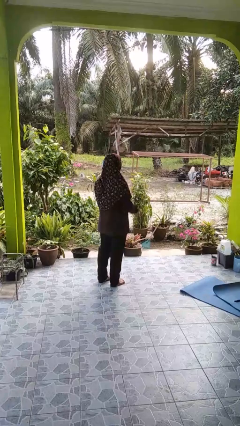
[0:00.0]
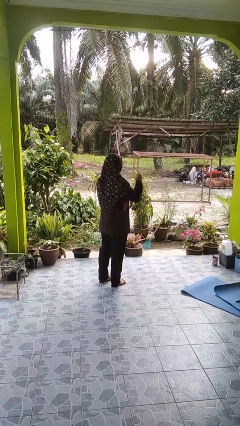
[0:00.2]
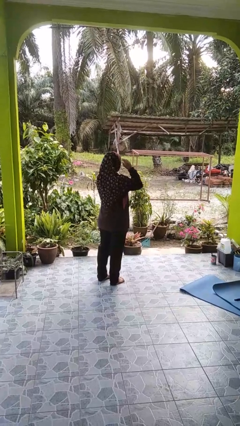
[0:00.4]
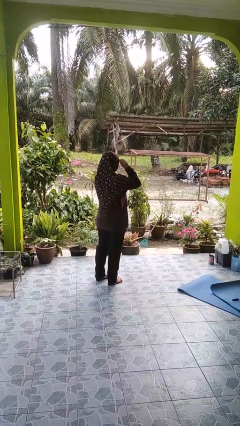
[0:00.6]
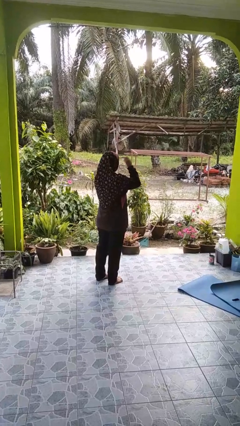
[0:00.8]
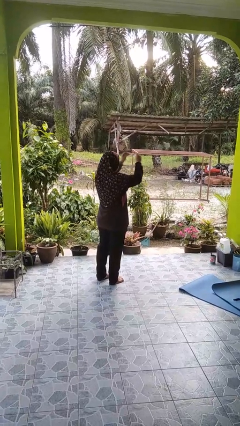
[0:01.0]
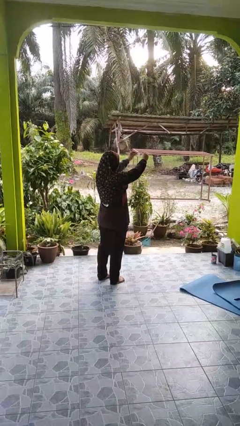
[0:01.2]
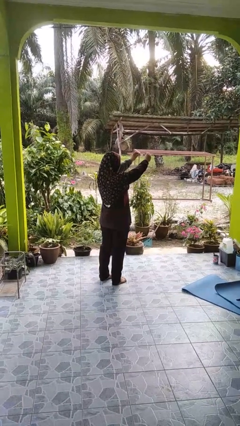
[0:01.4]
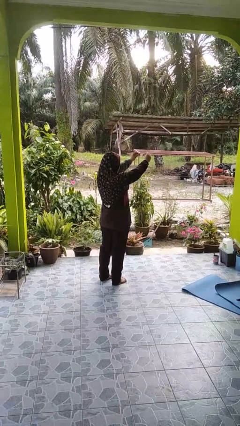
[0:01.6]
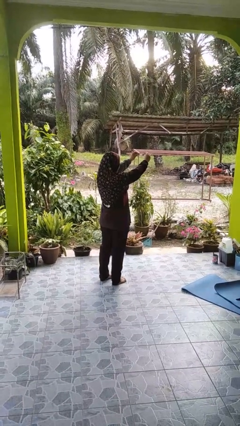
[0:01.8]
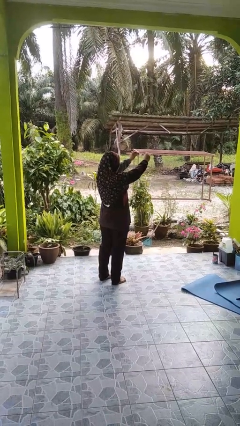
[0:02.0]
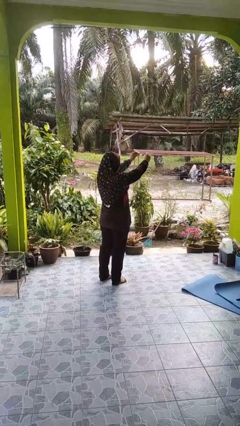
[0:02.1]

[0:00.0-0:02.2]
person takes off glasses

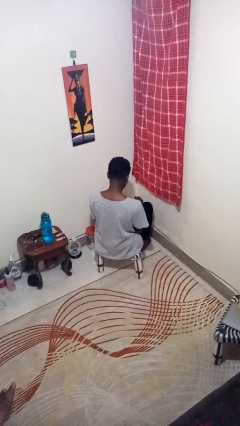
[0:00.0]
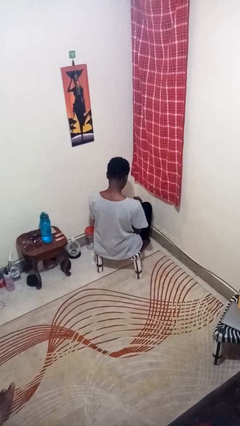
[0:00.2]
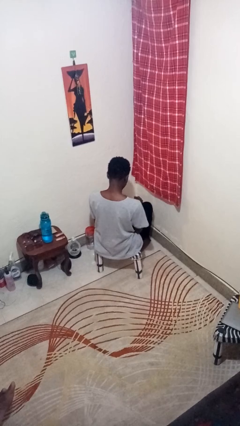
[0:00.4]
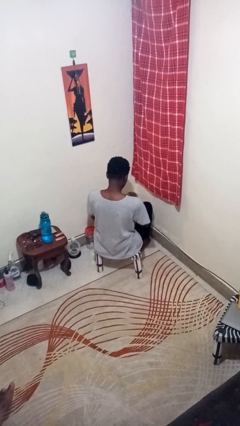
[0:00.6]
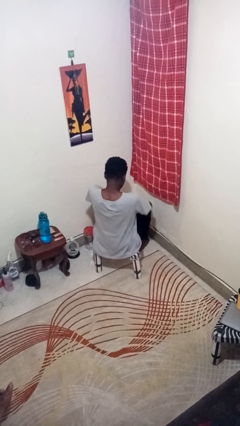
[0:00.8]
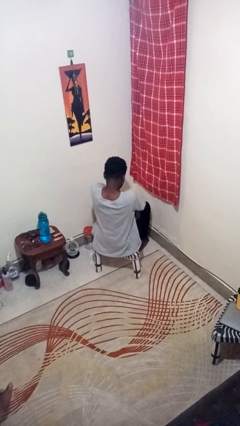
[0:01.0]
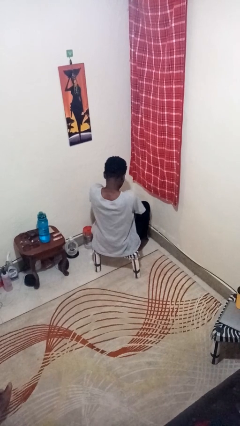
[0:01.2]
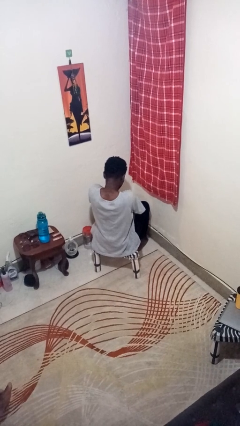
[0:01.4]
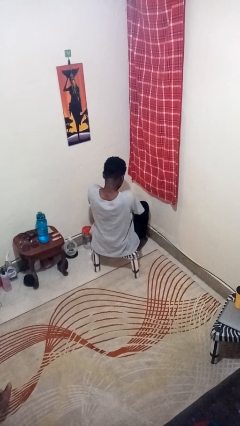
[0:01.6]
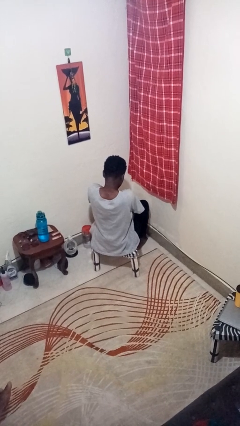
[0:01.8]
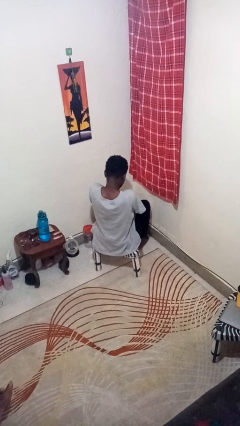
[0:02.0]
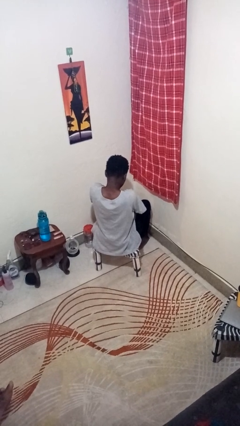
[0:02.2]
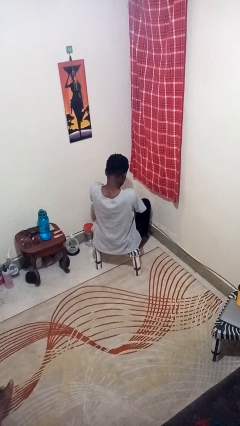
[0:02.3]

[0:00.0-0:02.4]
person crosses arms

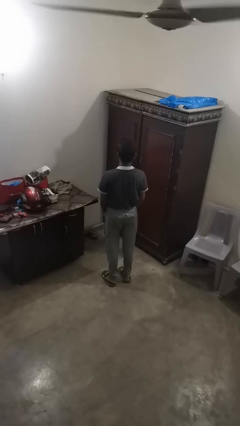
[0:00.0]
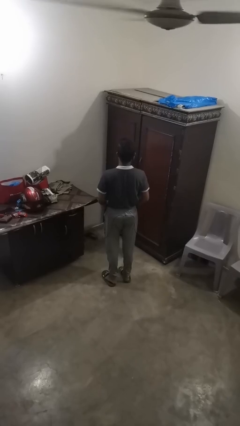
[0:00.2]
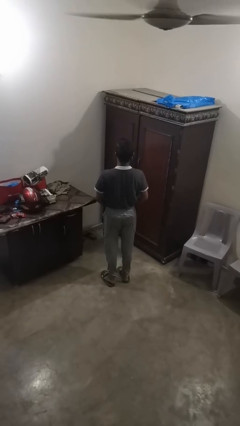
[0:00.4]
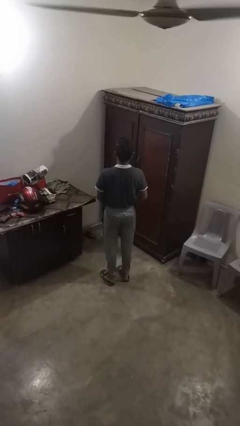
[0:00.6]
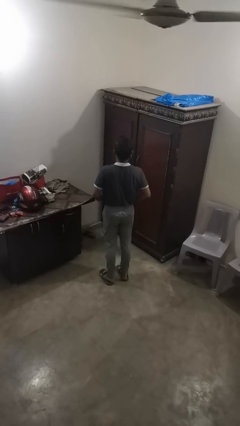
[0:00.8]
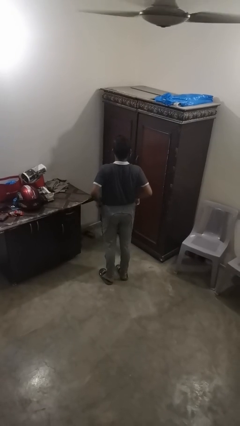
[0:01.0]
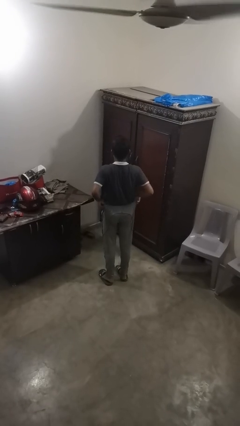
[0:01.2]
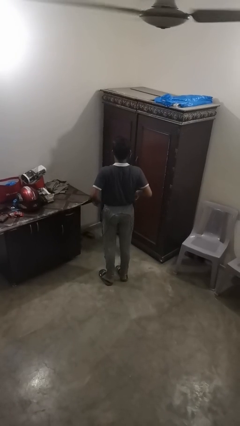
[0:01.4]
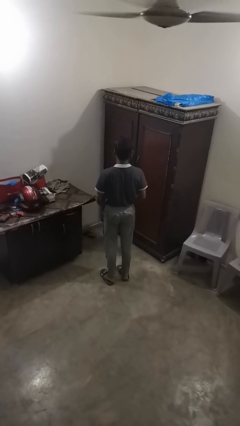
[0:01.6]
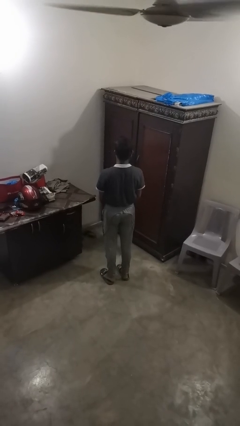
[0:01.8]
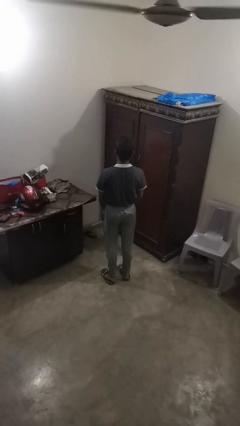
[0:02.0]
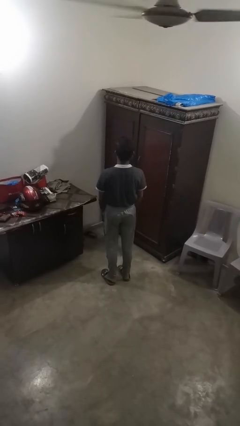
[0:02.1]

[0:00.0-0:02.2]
person hikes up pants

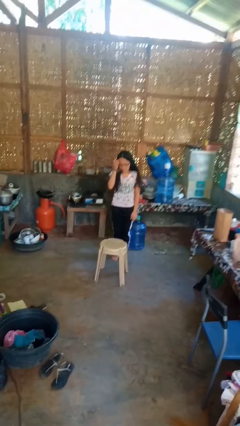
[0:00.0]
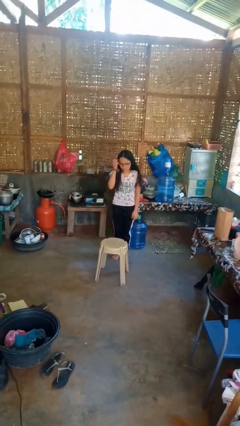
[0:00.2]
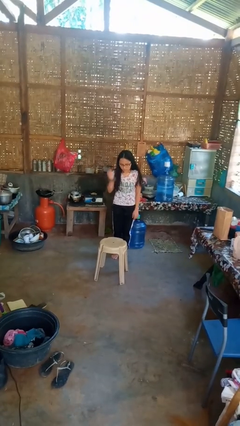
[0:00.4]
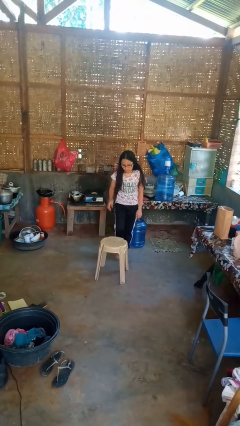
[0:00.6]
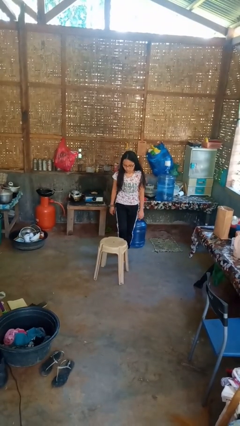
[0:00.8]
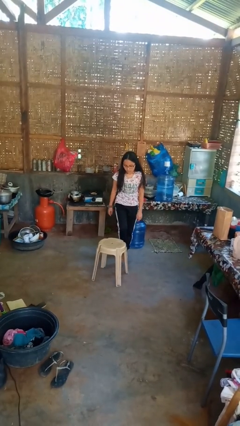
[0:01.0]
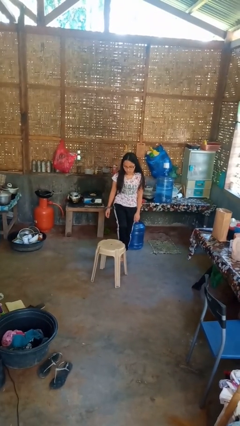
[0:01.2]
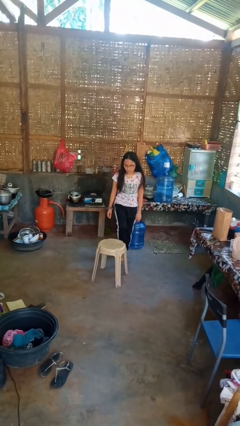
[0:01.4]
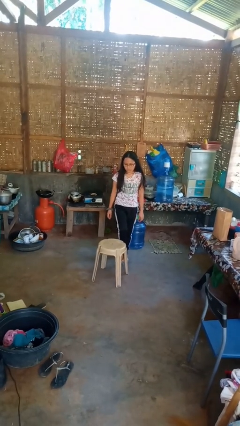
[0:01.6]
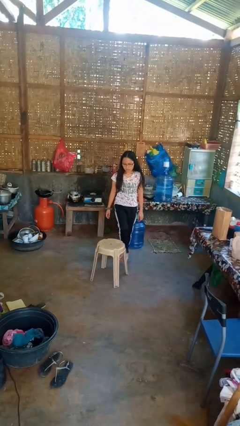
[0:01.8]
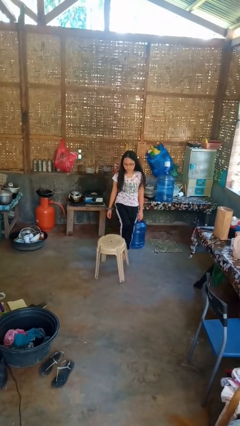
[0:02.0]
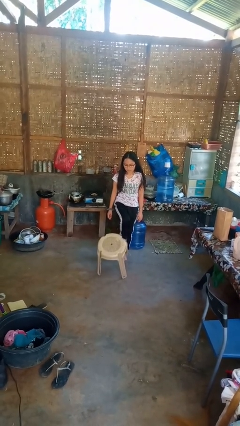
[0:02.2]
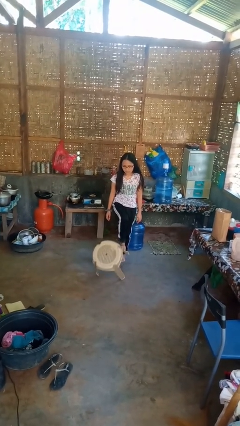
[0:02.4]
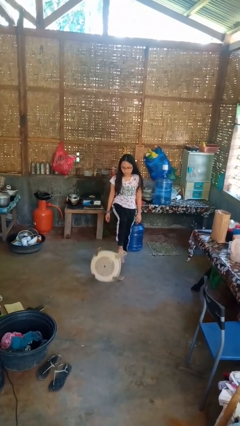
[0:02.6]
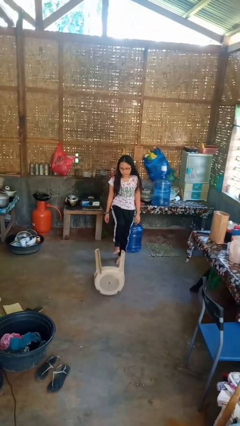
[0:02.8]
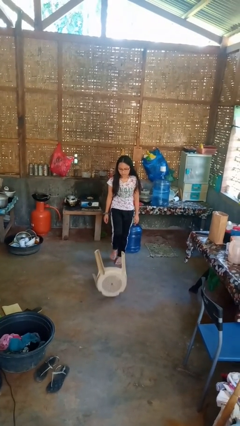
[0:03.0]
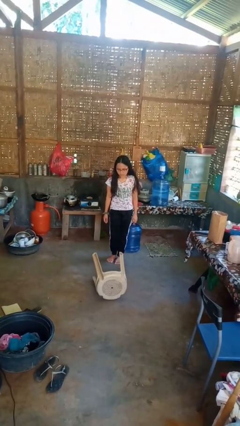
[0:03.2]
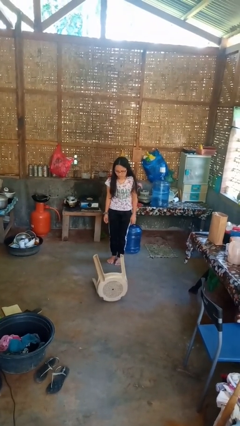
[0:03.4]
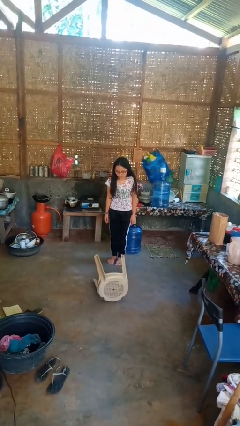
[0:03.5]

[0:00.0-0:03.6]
person knocks over furniture

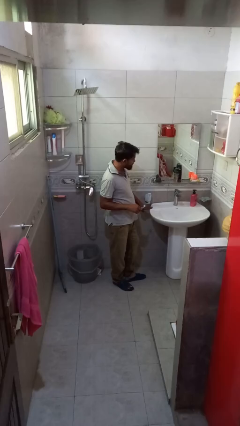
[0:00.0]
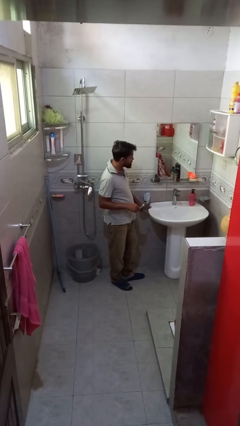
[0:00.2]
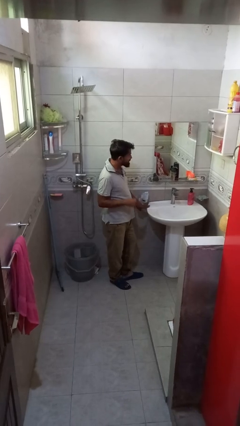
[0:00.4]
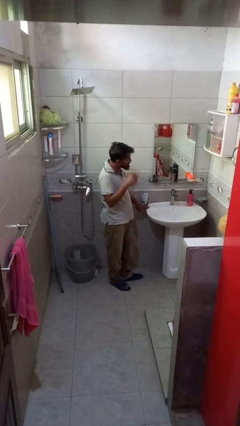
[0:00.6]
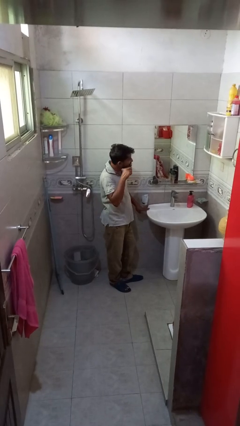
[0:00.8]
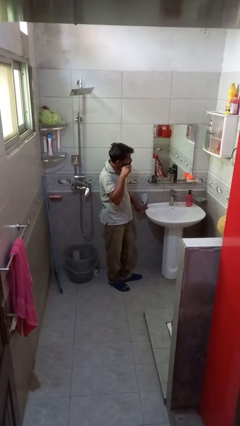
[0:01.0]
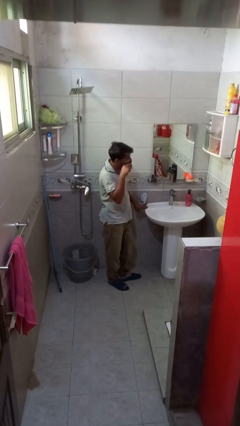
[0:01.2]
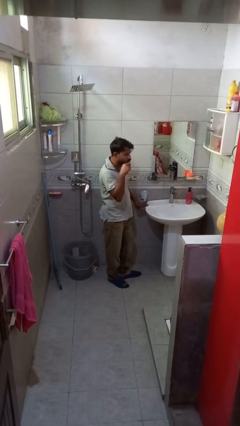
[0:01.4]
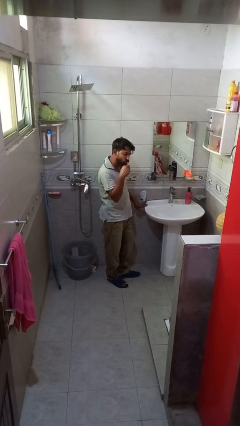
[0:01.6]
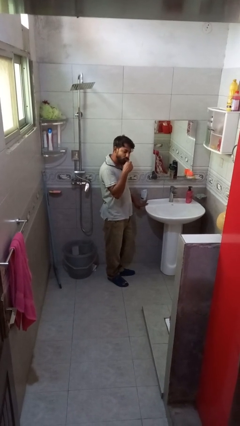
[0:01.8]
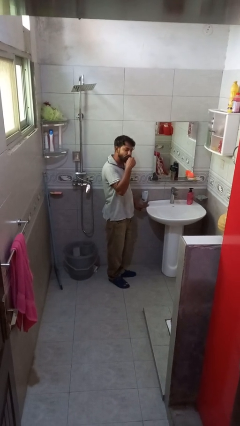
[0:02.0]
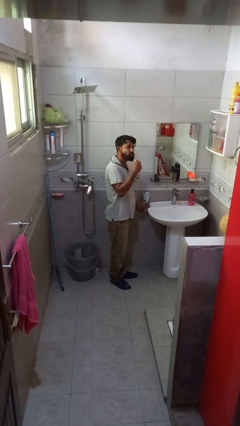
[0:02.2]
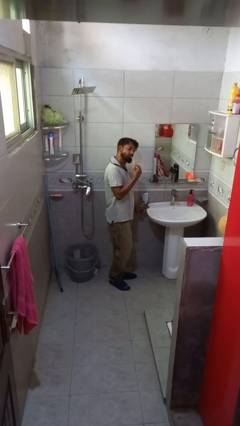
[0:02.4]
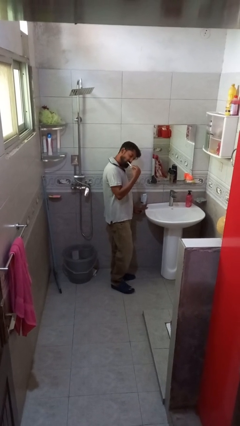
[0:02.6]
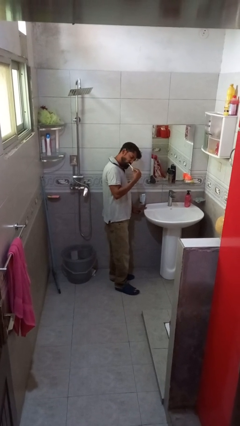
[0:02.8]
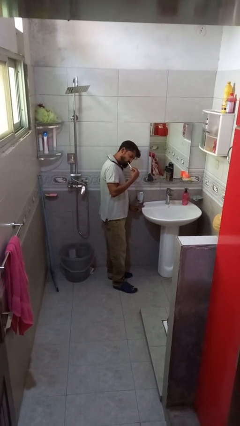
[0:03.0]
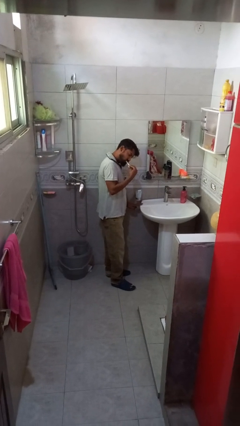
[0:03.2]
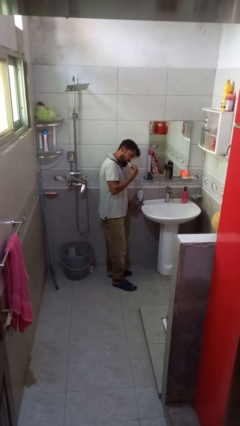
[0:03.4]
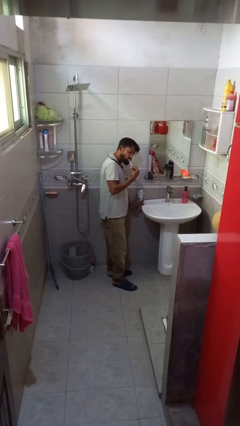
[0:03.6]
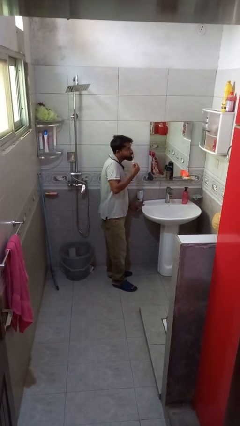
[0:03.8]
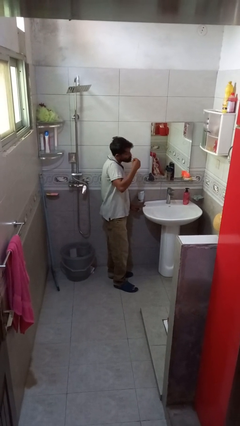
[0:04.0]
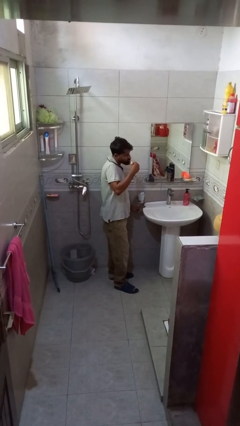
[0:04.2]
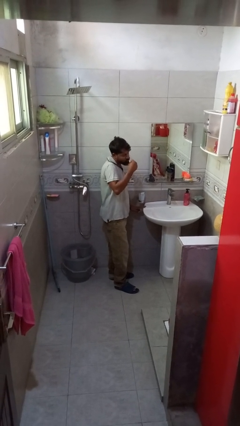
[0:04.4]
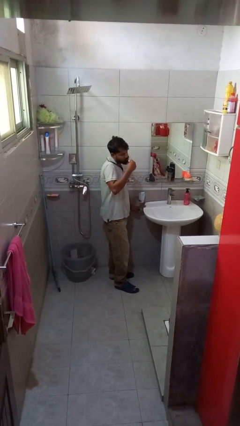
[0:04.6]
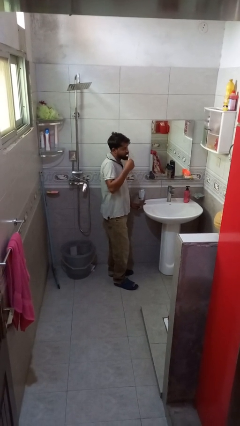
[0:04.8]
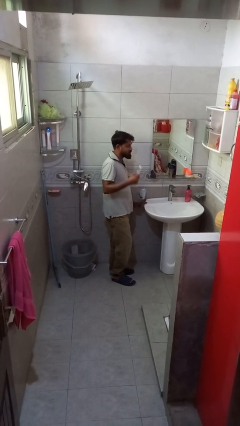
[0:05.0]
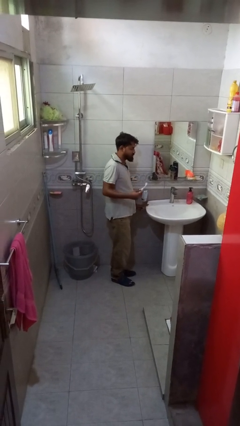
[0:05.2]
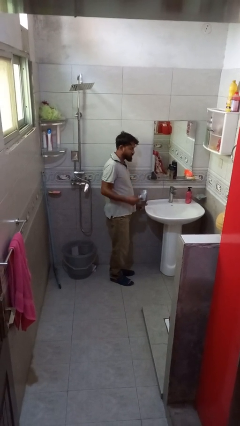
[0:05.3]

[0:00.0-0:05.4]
person brushes teeth

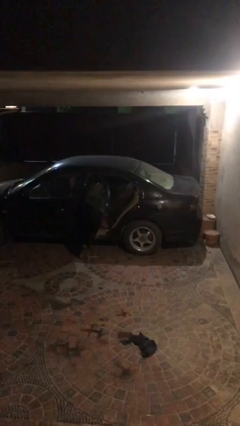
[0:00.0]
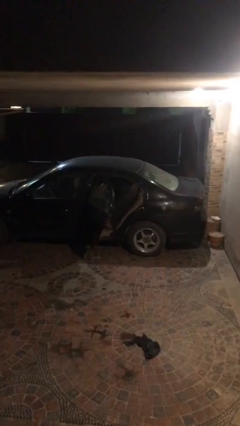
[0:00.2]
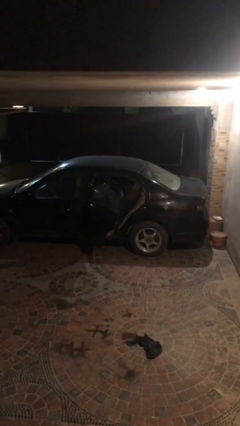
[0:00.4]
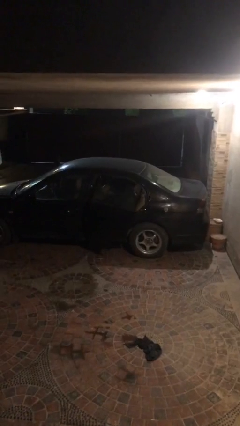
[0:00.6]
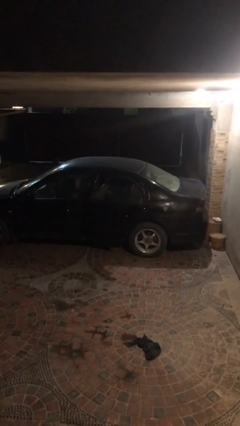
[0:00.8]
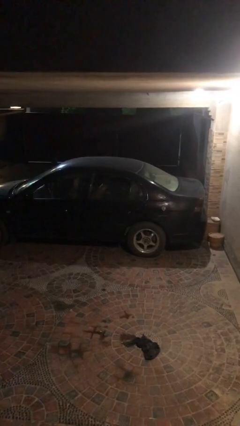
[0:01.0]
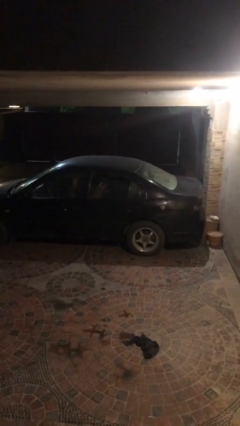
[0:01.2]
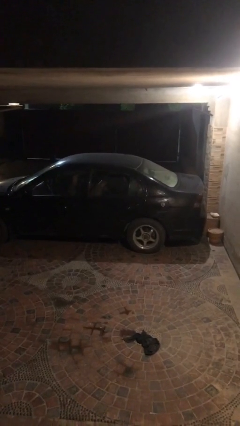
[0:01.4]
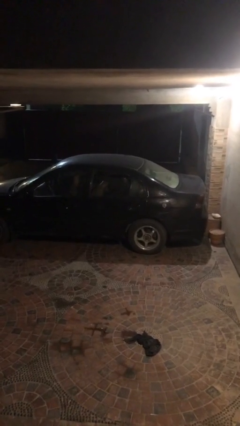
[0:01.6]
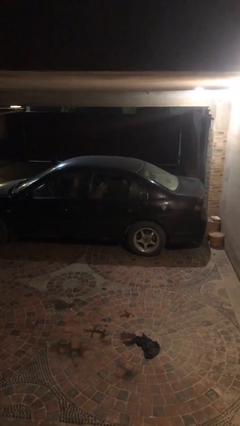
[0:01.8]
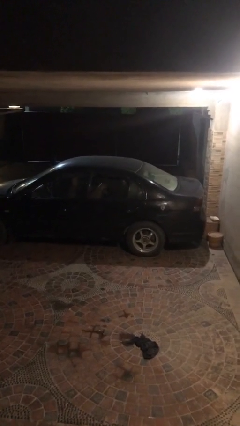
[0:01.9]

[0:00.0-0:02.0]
person closes car door
